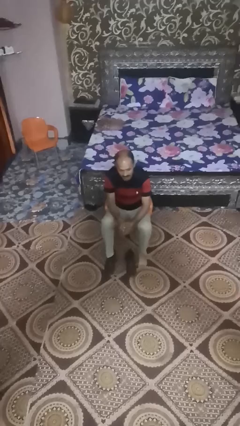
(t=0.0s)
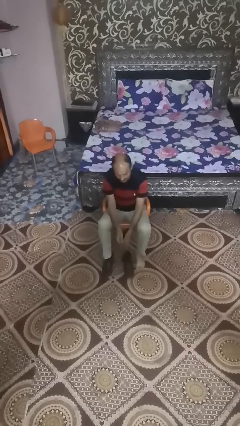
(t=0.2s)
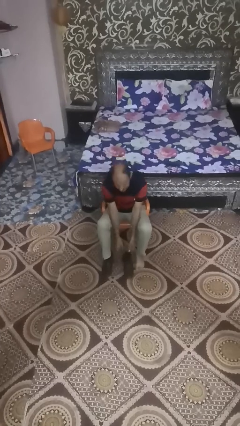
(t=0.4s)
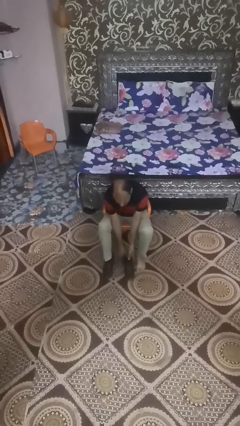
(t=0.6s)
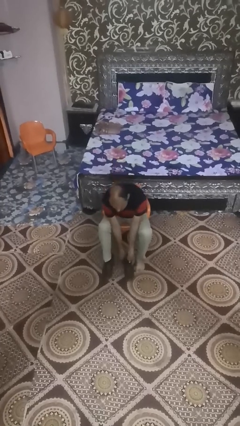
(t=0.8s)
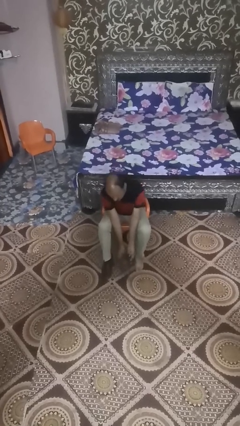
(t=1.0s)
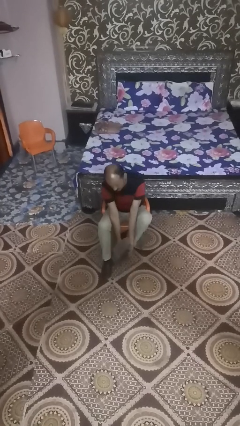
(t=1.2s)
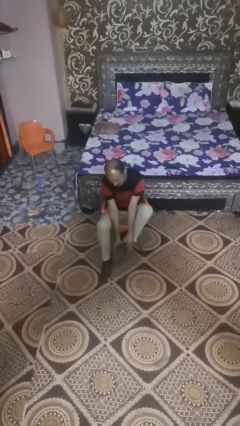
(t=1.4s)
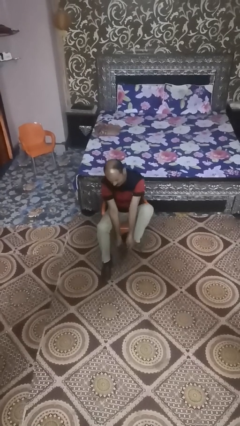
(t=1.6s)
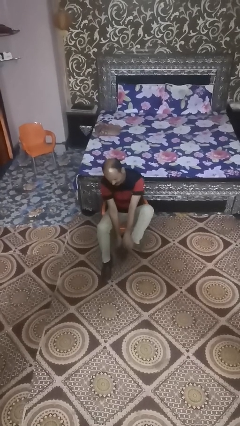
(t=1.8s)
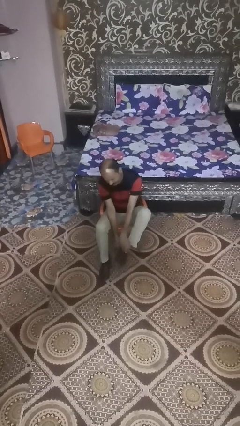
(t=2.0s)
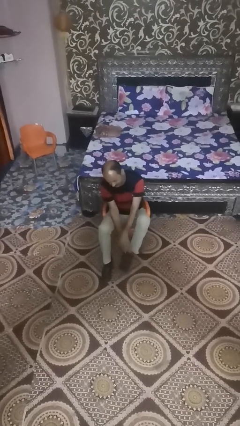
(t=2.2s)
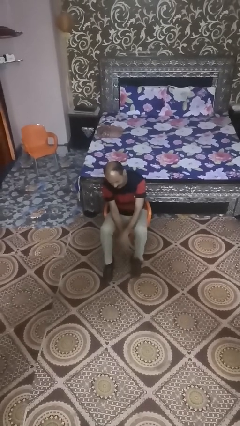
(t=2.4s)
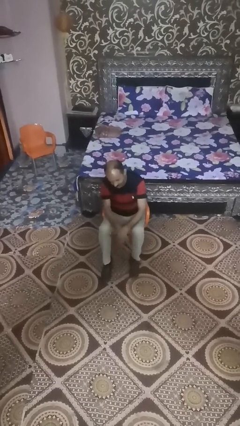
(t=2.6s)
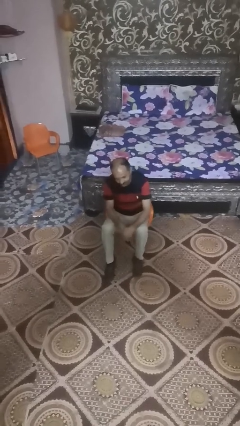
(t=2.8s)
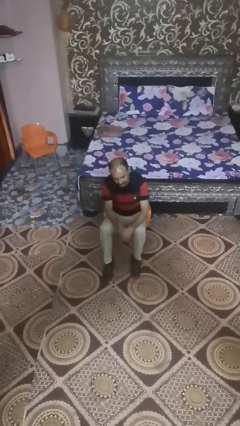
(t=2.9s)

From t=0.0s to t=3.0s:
person puts on boots

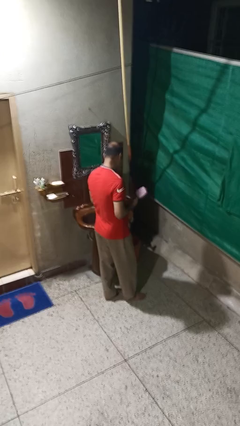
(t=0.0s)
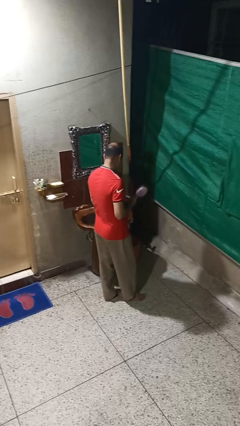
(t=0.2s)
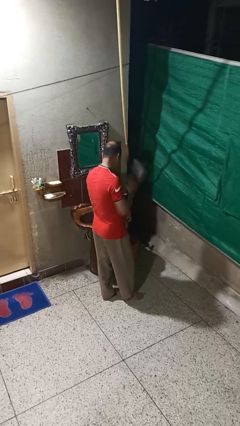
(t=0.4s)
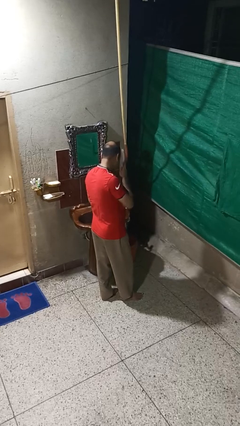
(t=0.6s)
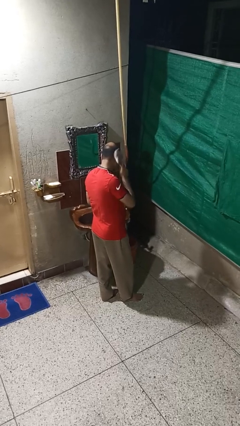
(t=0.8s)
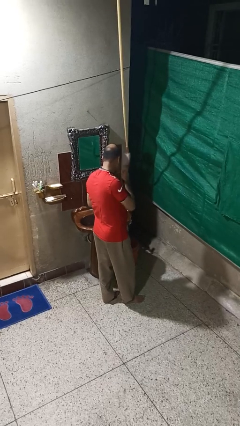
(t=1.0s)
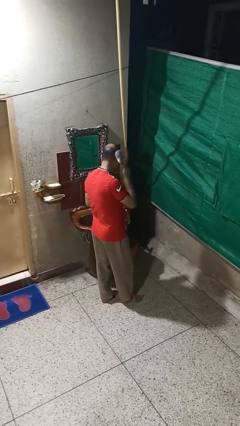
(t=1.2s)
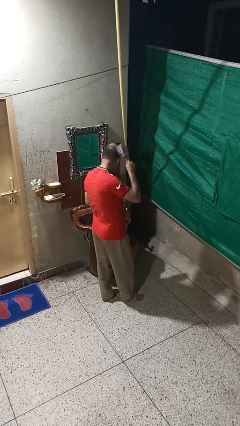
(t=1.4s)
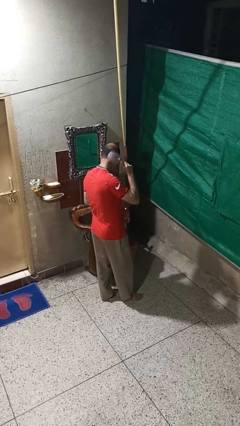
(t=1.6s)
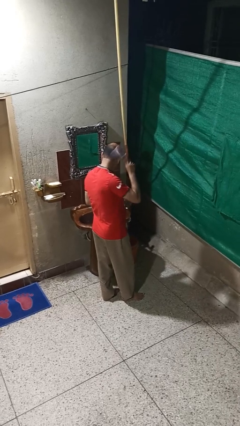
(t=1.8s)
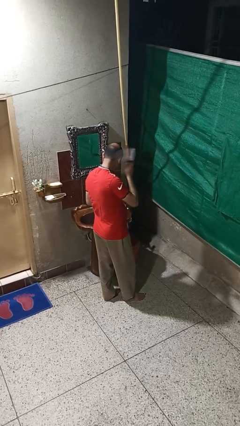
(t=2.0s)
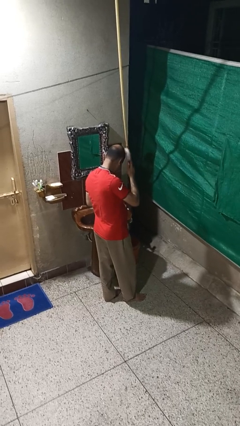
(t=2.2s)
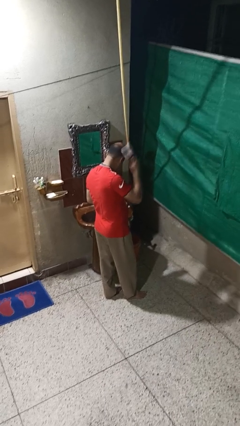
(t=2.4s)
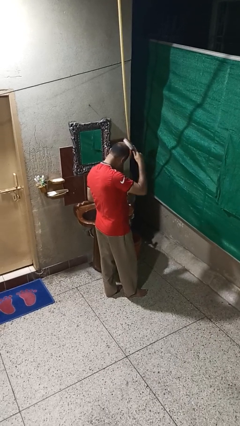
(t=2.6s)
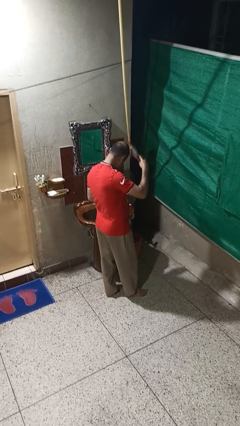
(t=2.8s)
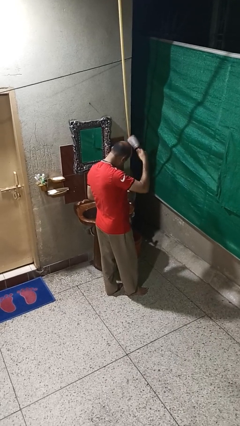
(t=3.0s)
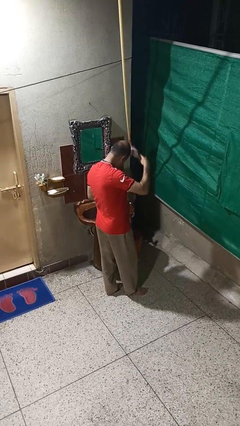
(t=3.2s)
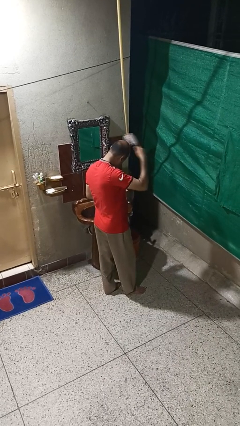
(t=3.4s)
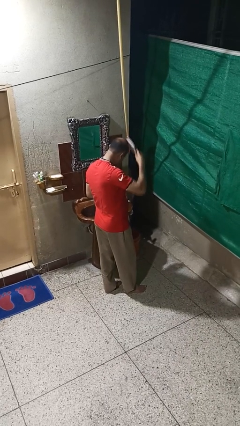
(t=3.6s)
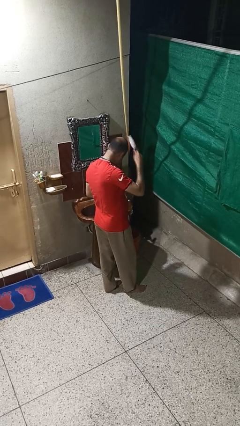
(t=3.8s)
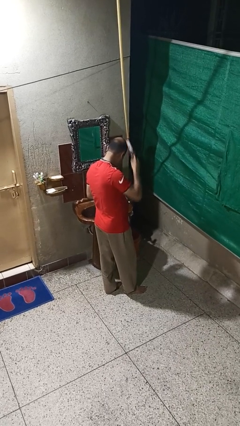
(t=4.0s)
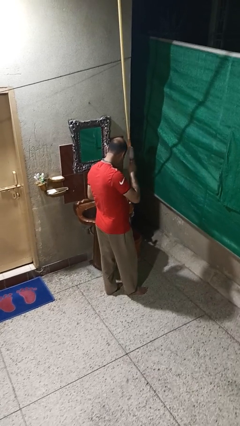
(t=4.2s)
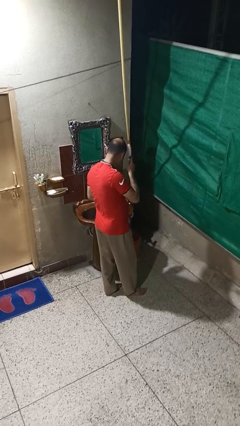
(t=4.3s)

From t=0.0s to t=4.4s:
person brushes hair

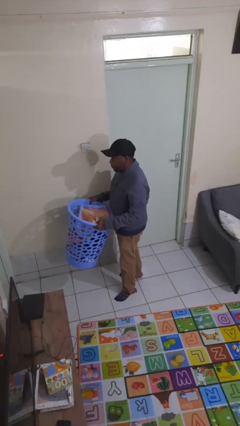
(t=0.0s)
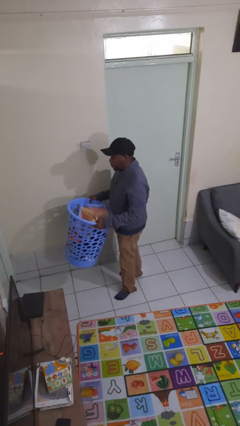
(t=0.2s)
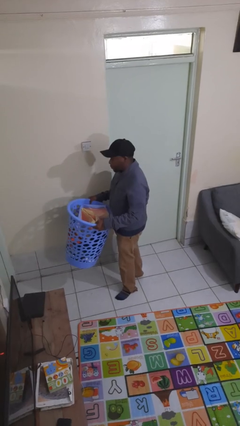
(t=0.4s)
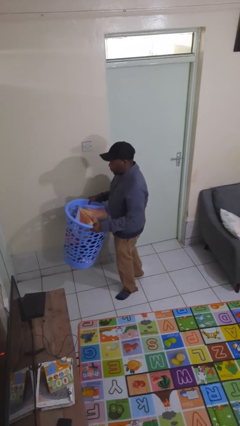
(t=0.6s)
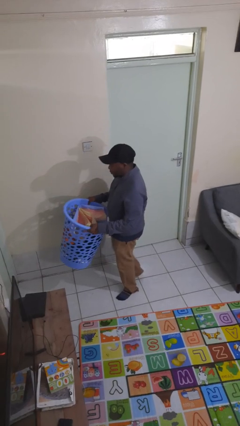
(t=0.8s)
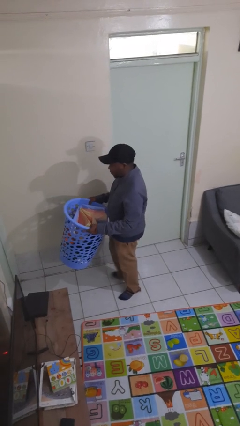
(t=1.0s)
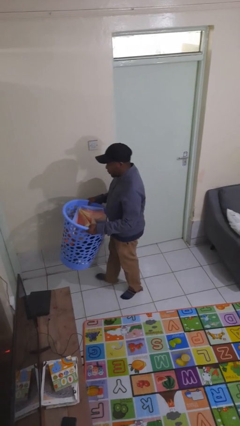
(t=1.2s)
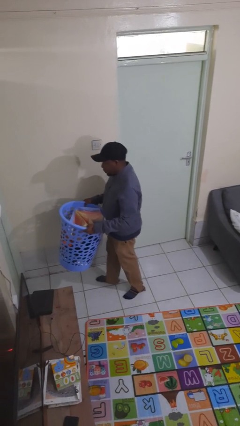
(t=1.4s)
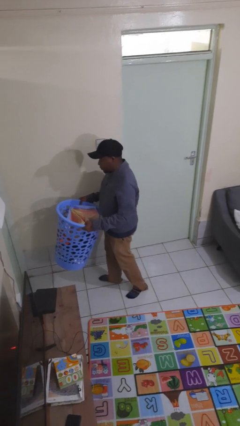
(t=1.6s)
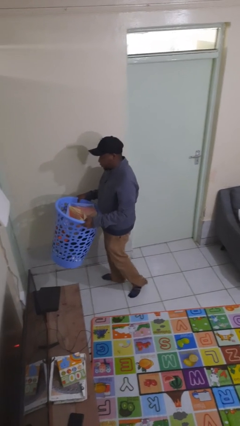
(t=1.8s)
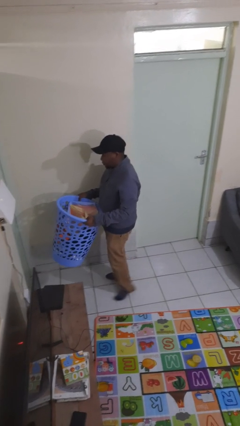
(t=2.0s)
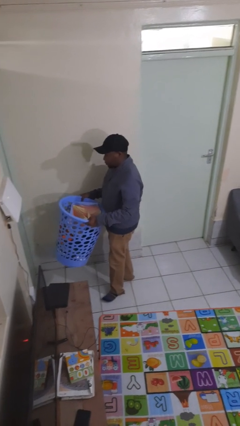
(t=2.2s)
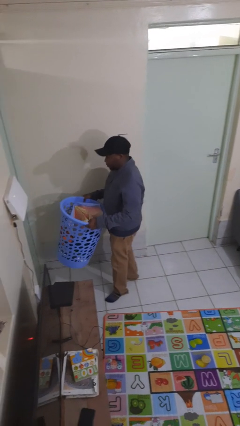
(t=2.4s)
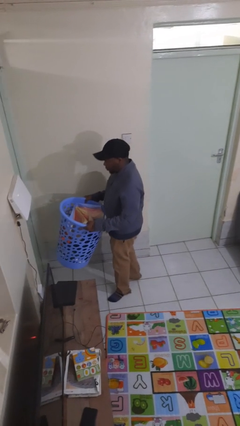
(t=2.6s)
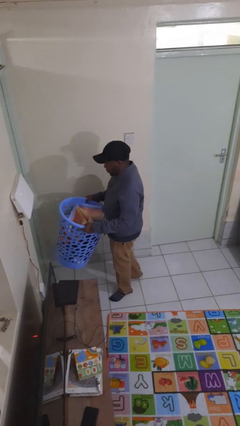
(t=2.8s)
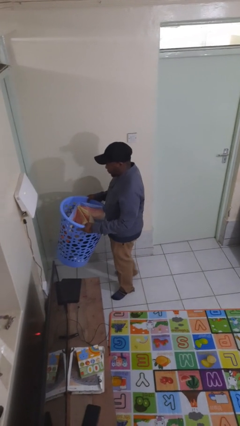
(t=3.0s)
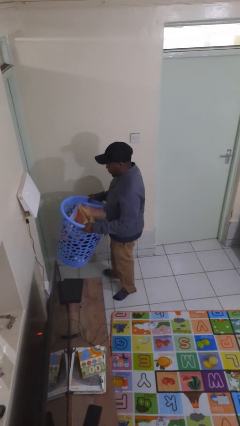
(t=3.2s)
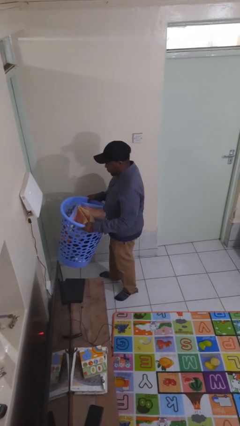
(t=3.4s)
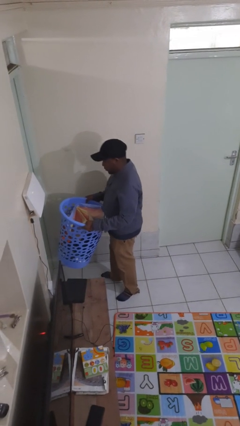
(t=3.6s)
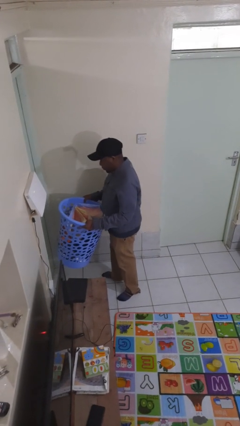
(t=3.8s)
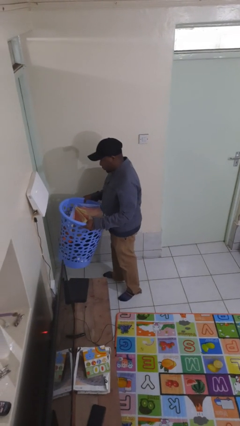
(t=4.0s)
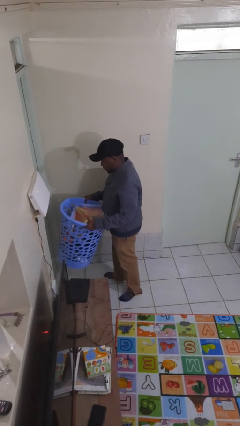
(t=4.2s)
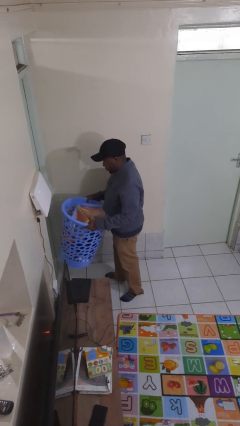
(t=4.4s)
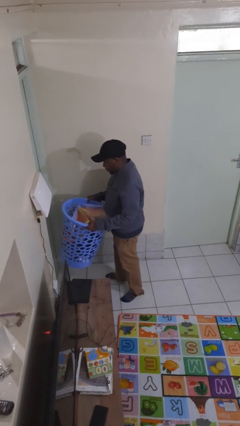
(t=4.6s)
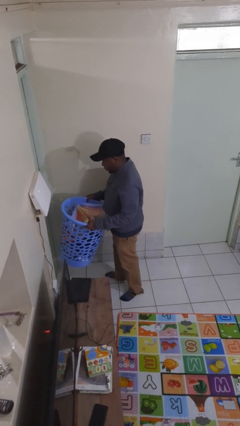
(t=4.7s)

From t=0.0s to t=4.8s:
person carries laundry basket

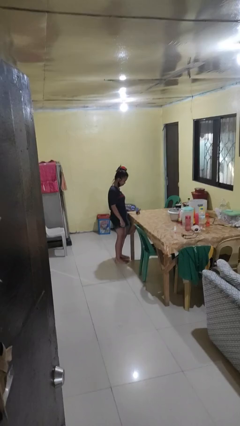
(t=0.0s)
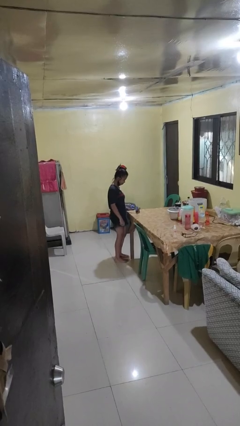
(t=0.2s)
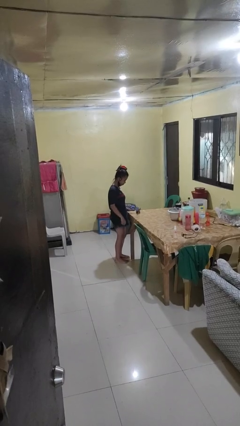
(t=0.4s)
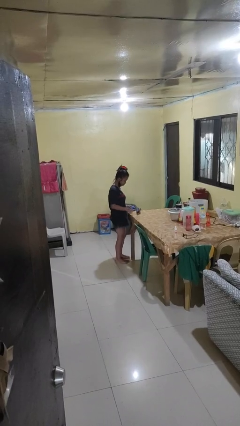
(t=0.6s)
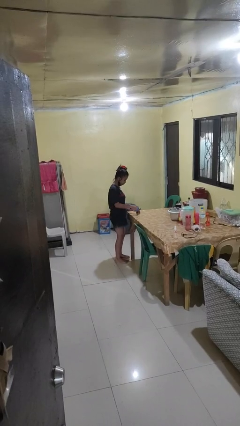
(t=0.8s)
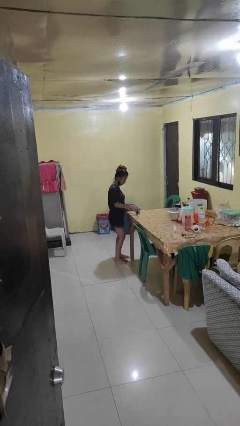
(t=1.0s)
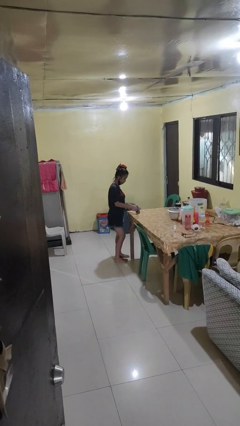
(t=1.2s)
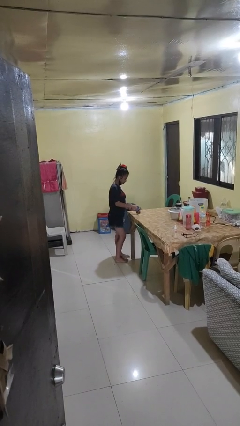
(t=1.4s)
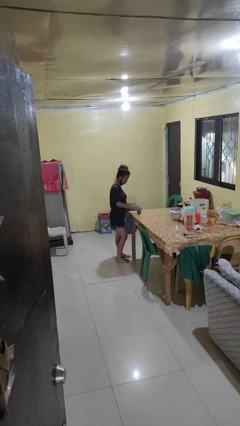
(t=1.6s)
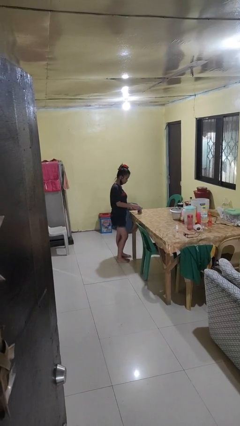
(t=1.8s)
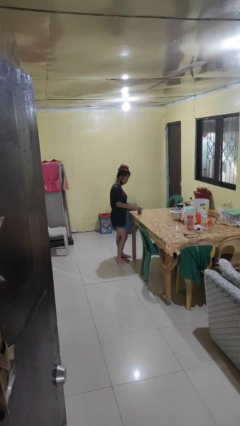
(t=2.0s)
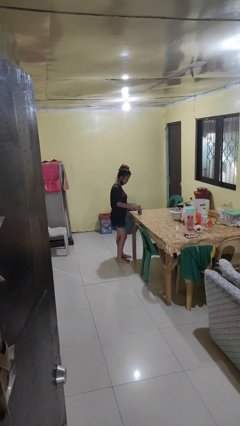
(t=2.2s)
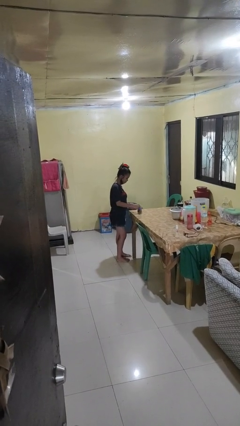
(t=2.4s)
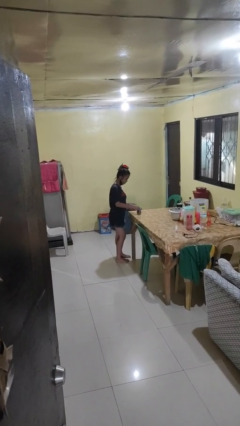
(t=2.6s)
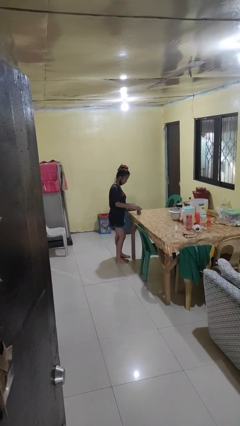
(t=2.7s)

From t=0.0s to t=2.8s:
person opens can with can opener

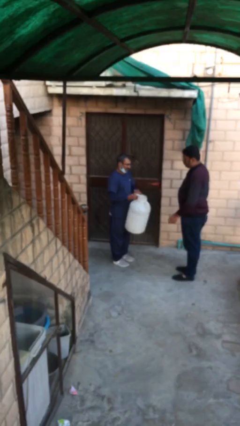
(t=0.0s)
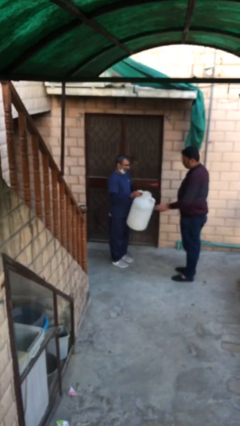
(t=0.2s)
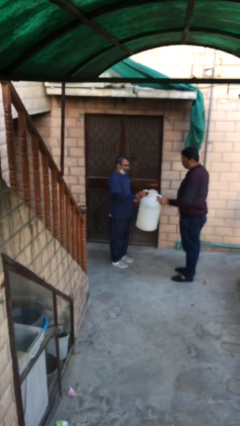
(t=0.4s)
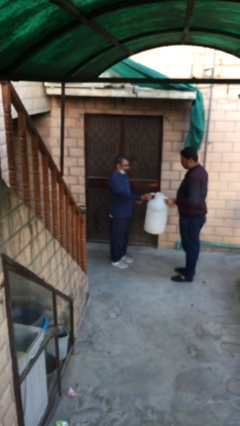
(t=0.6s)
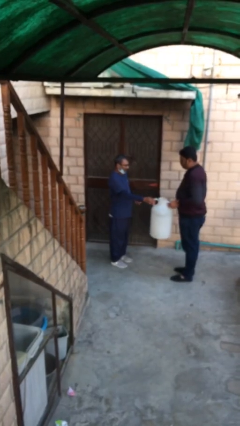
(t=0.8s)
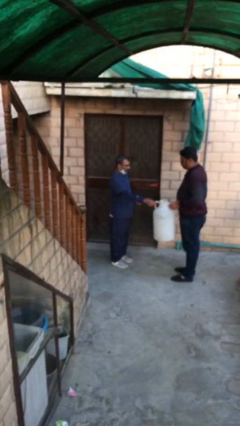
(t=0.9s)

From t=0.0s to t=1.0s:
person transfers object to person

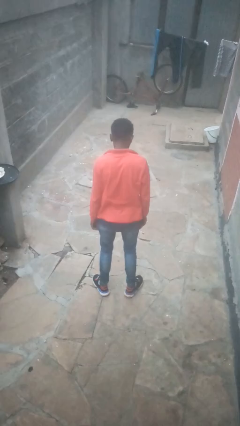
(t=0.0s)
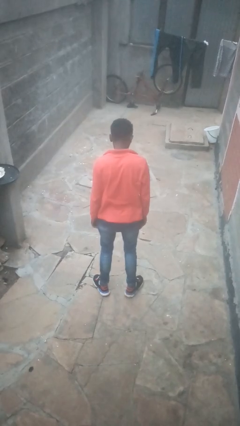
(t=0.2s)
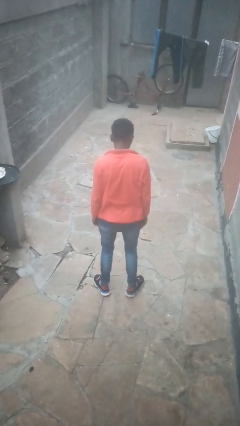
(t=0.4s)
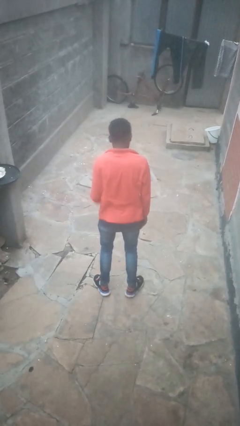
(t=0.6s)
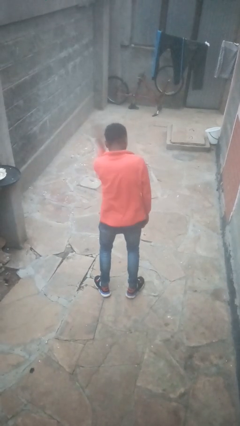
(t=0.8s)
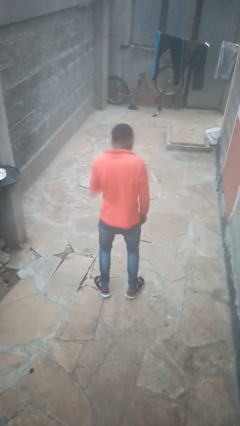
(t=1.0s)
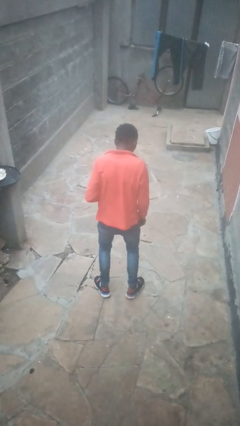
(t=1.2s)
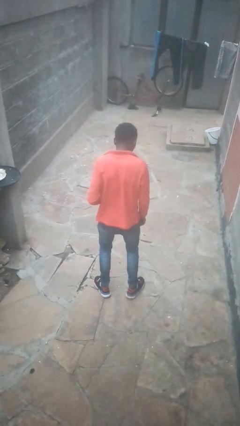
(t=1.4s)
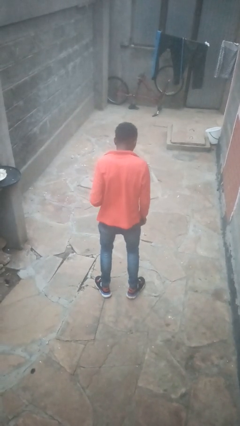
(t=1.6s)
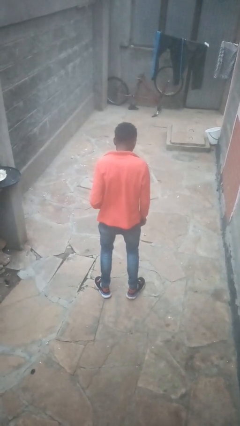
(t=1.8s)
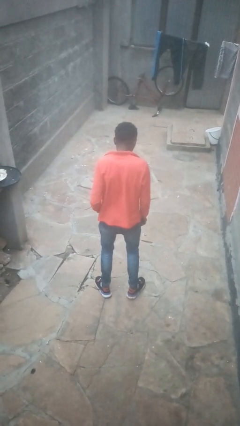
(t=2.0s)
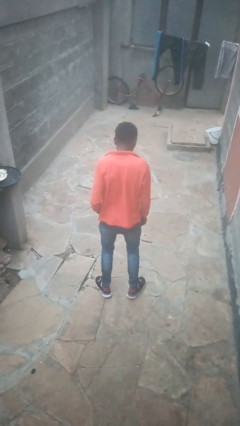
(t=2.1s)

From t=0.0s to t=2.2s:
person swats bug
